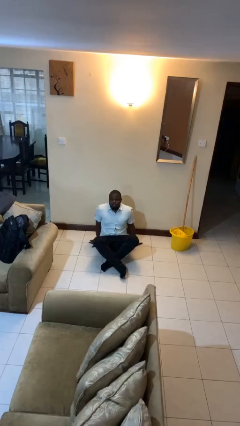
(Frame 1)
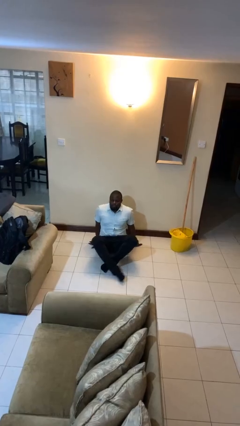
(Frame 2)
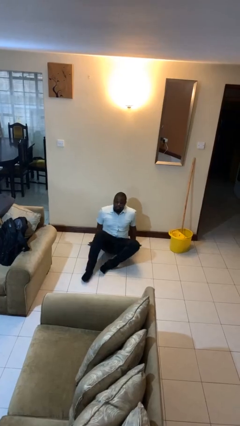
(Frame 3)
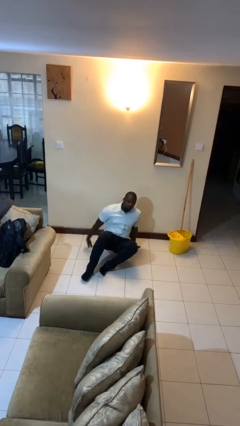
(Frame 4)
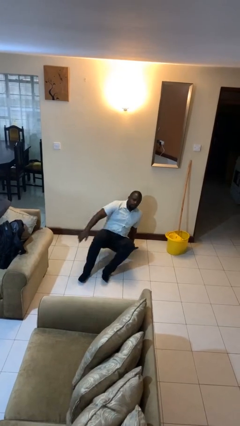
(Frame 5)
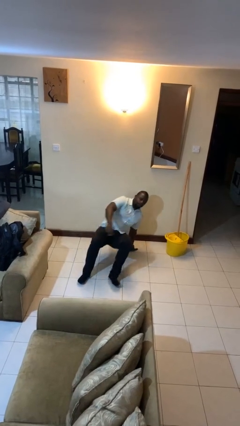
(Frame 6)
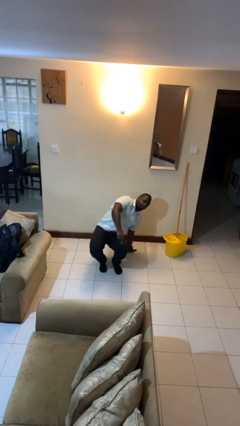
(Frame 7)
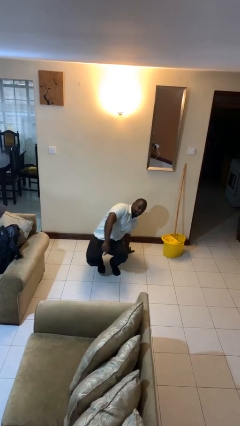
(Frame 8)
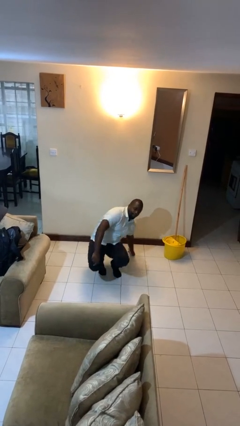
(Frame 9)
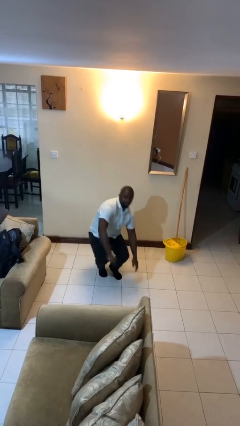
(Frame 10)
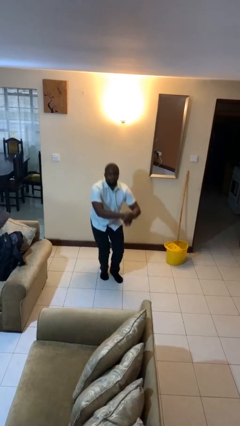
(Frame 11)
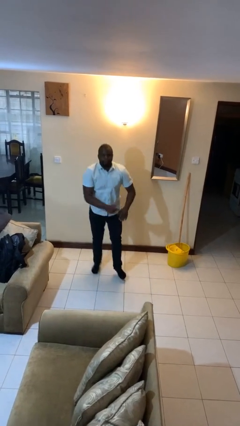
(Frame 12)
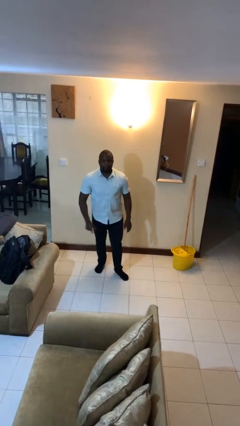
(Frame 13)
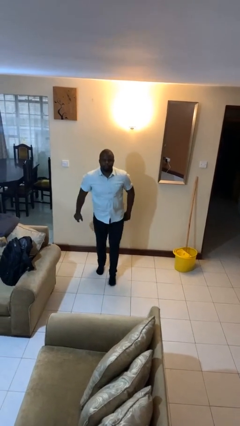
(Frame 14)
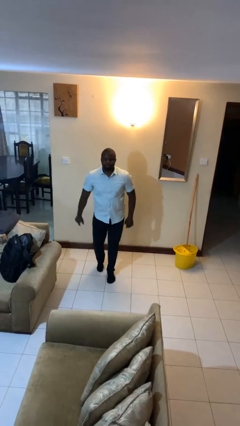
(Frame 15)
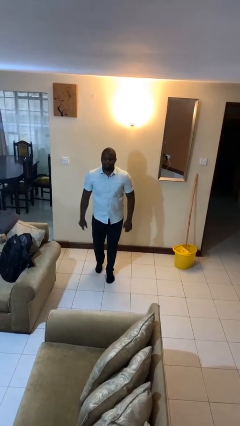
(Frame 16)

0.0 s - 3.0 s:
person stands up from floor

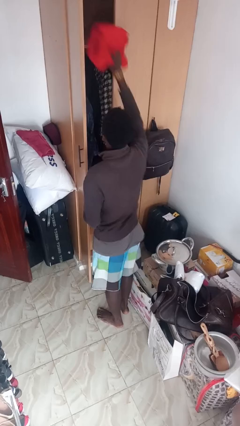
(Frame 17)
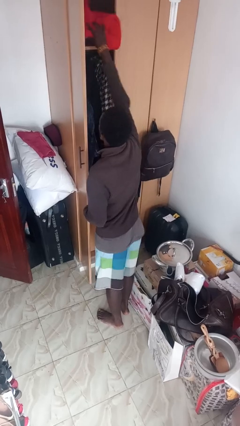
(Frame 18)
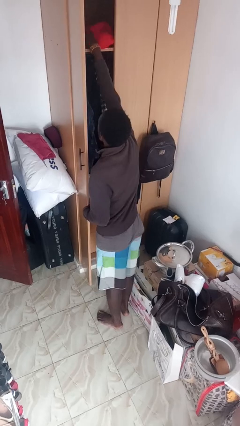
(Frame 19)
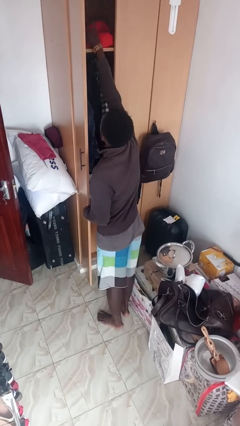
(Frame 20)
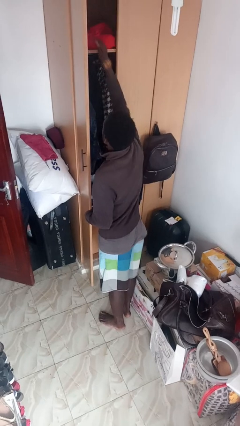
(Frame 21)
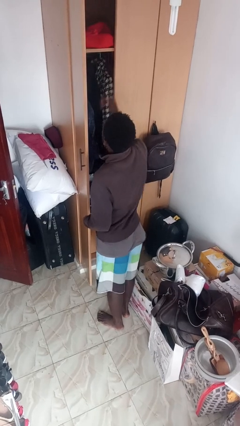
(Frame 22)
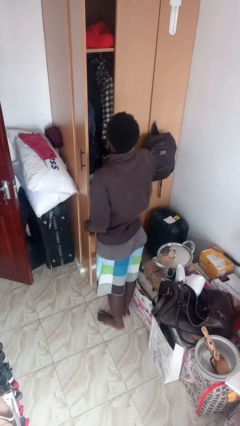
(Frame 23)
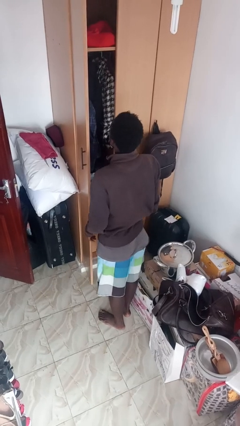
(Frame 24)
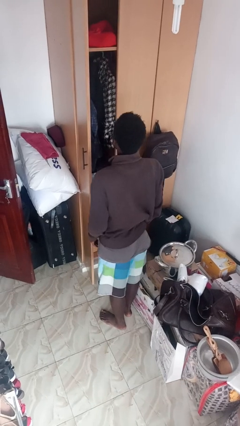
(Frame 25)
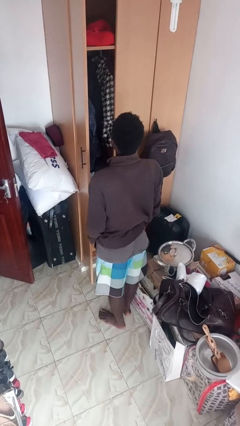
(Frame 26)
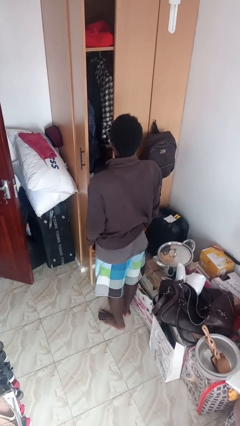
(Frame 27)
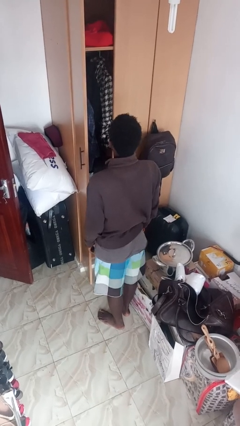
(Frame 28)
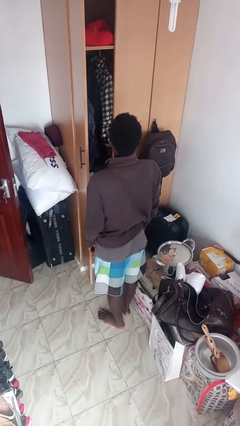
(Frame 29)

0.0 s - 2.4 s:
person puts down object on shelf

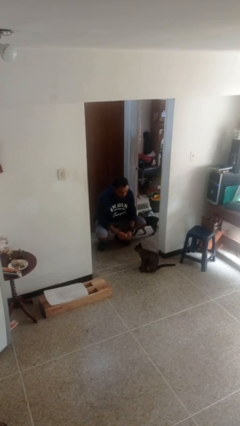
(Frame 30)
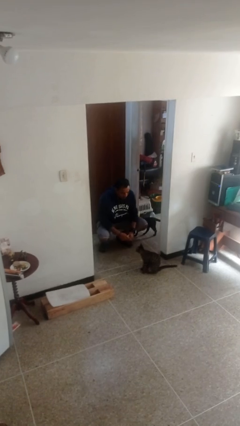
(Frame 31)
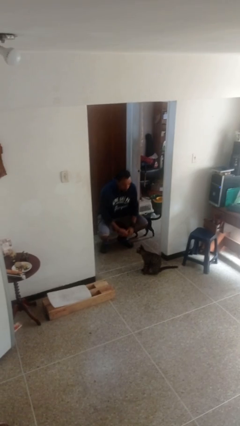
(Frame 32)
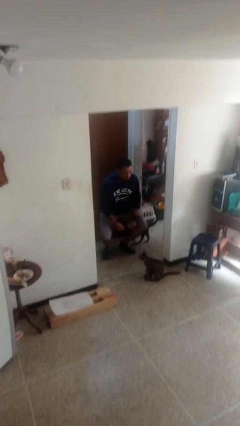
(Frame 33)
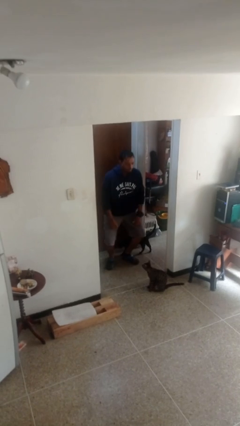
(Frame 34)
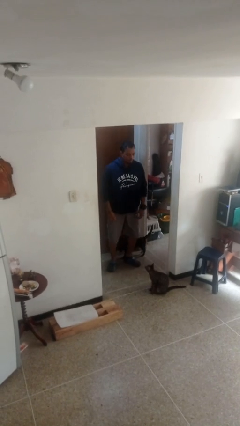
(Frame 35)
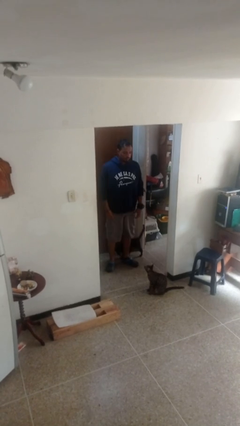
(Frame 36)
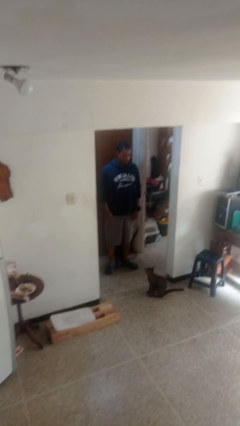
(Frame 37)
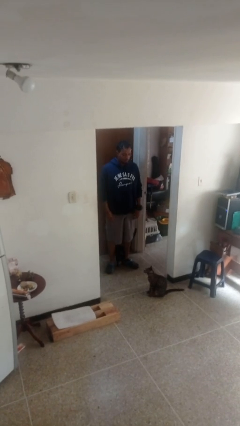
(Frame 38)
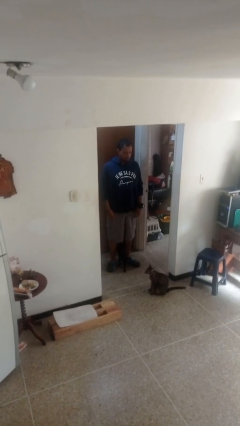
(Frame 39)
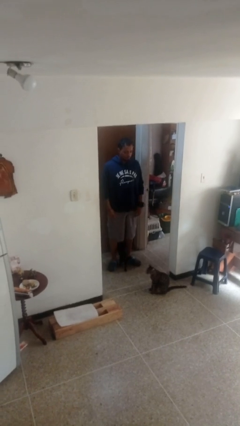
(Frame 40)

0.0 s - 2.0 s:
person stands up

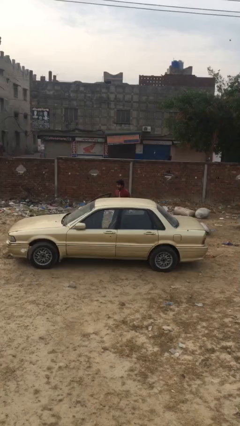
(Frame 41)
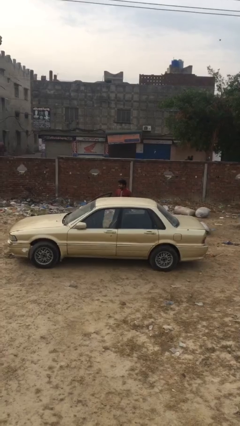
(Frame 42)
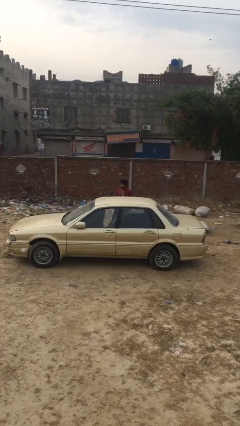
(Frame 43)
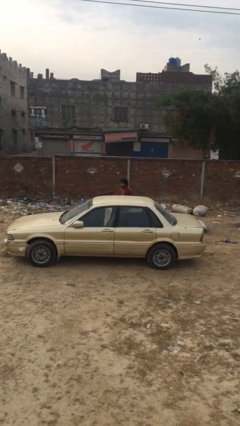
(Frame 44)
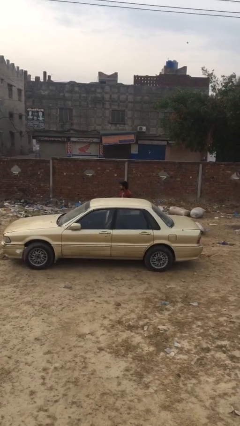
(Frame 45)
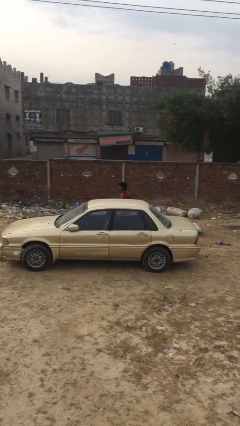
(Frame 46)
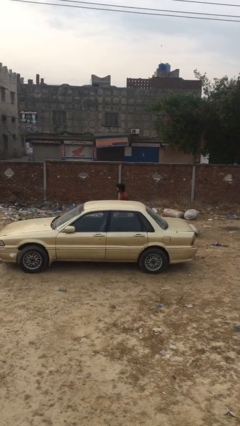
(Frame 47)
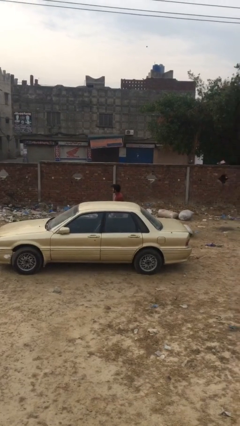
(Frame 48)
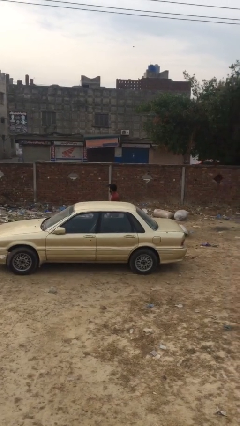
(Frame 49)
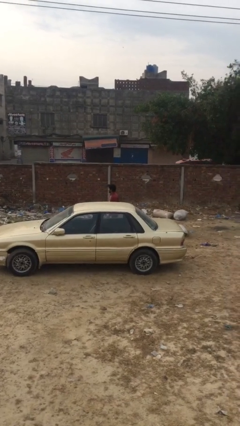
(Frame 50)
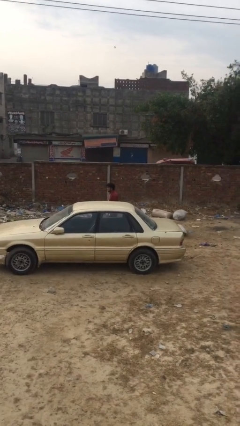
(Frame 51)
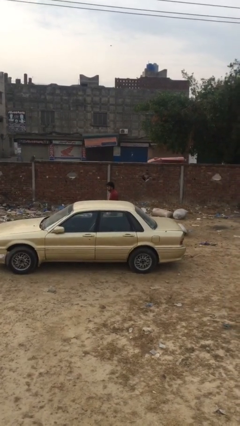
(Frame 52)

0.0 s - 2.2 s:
person closes car door

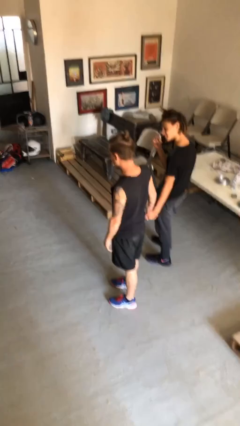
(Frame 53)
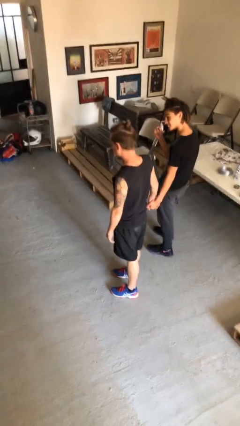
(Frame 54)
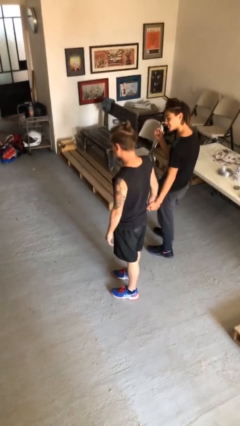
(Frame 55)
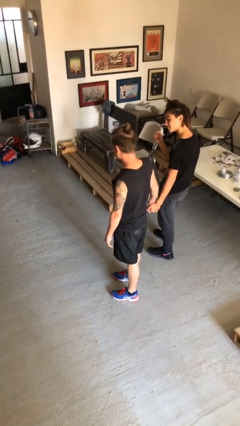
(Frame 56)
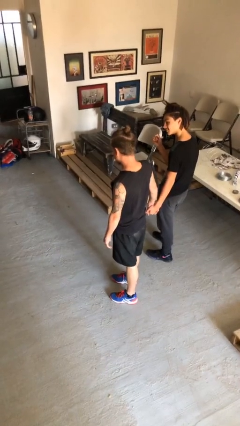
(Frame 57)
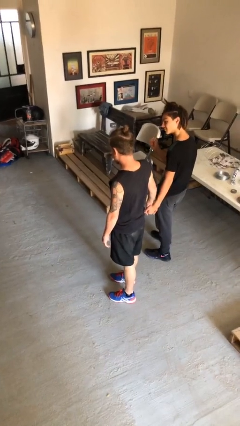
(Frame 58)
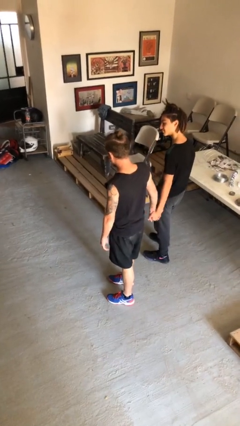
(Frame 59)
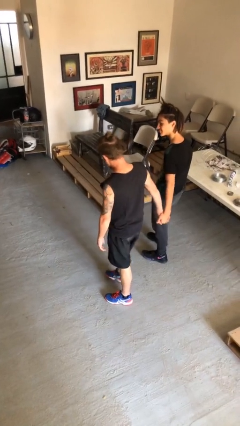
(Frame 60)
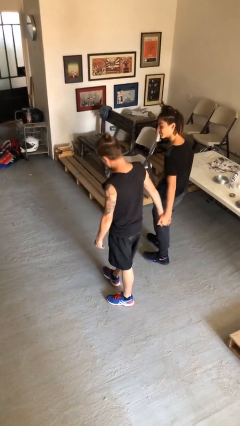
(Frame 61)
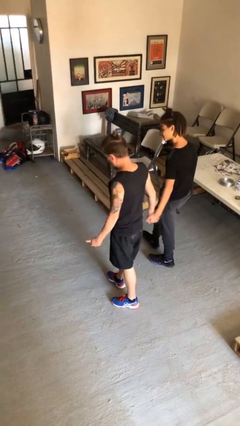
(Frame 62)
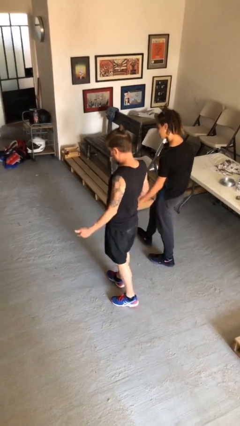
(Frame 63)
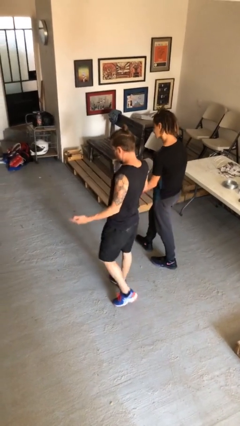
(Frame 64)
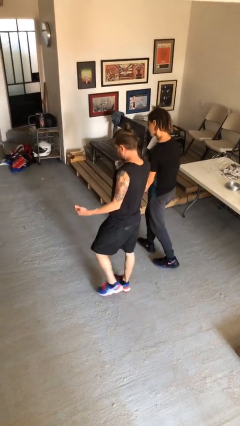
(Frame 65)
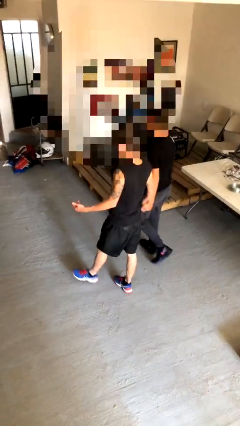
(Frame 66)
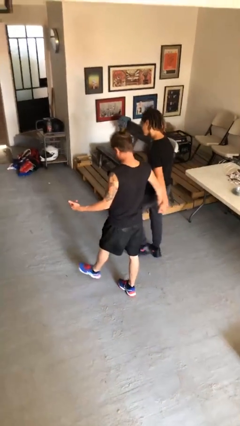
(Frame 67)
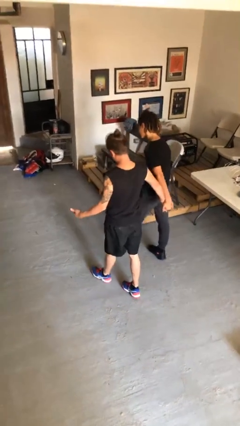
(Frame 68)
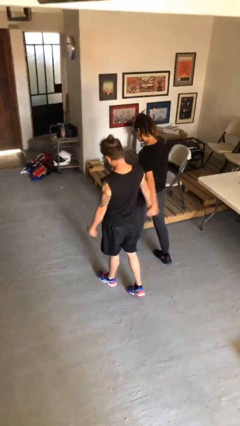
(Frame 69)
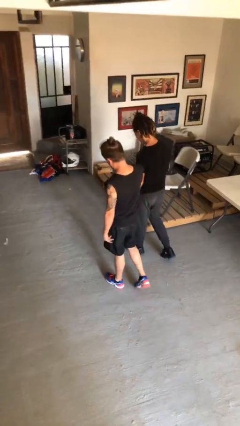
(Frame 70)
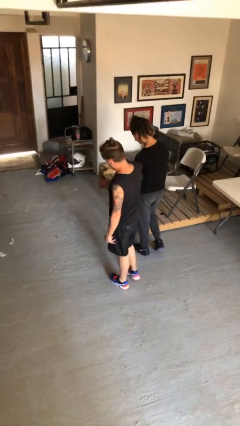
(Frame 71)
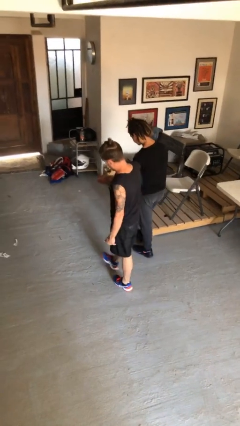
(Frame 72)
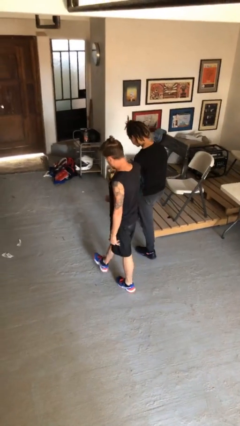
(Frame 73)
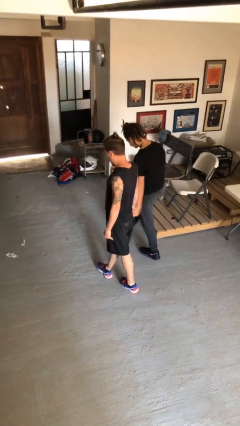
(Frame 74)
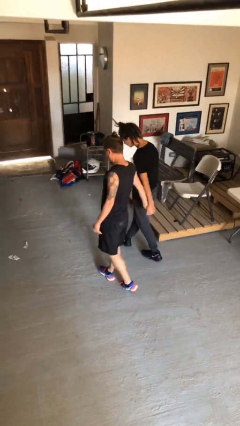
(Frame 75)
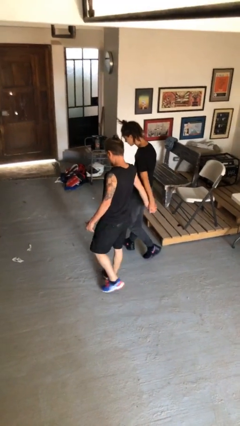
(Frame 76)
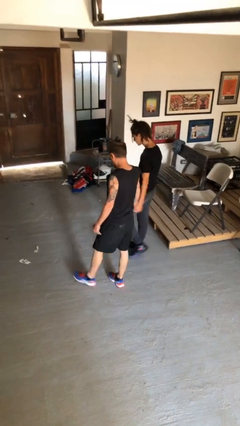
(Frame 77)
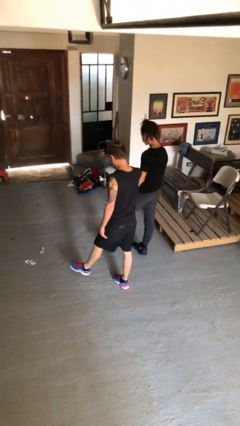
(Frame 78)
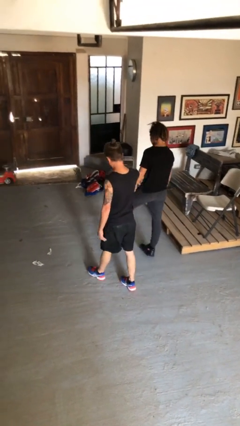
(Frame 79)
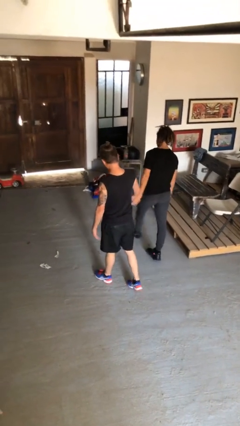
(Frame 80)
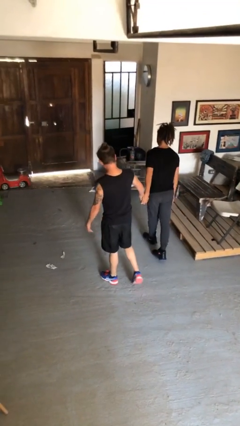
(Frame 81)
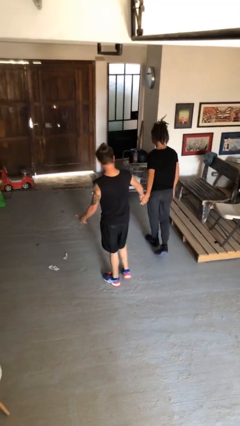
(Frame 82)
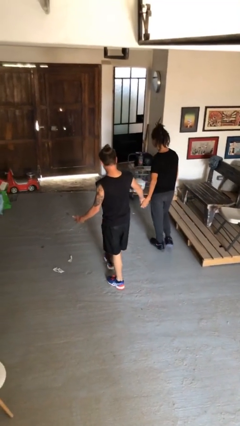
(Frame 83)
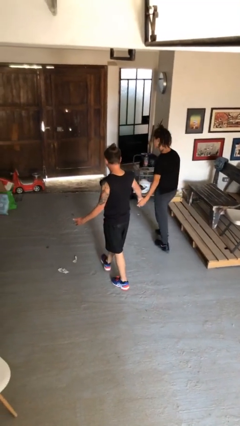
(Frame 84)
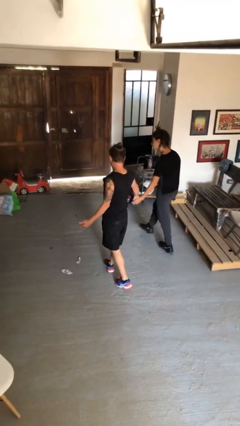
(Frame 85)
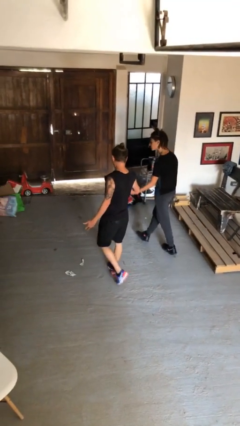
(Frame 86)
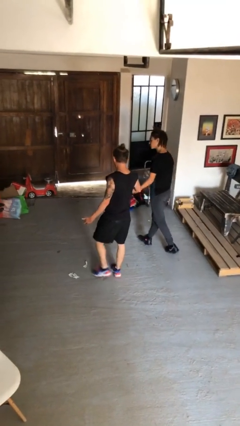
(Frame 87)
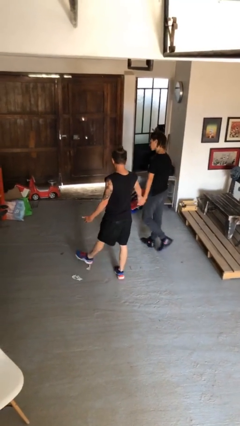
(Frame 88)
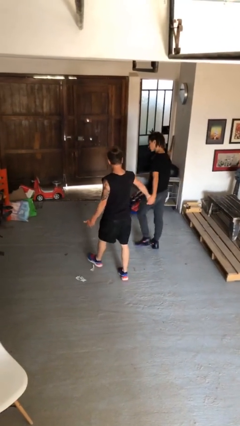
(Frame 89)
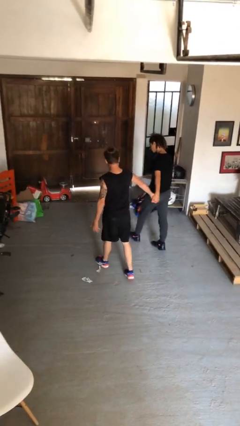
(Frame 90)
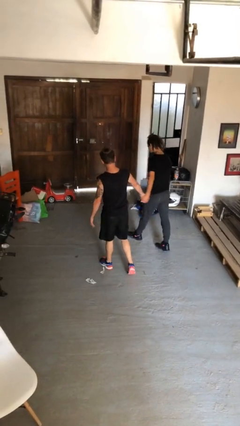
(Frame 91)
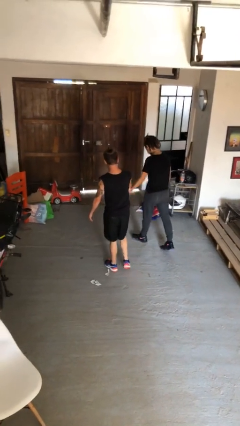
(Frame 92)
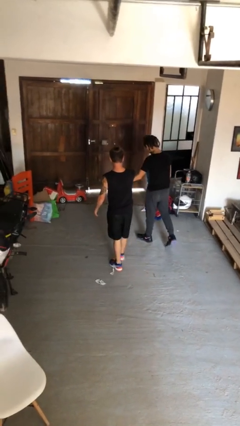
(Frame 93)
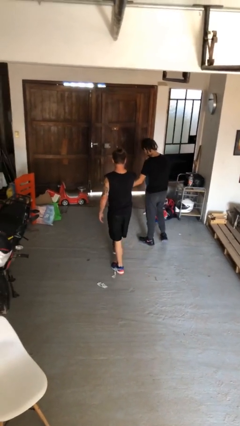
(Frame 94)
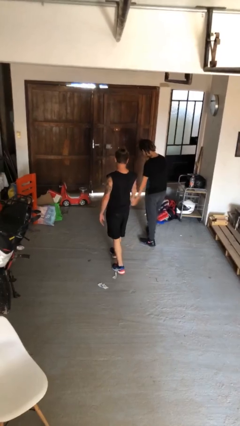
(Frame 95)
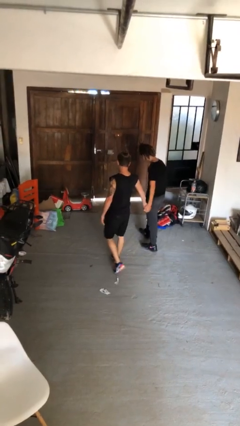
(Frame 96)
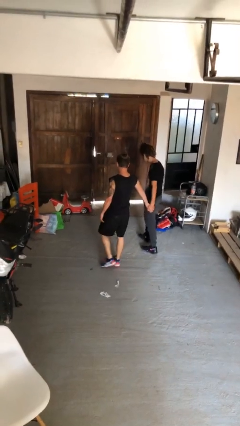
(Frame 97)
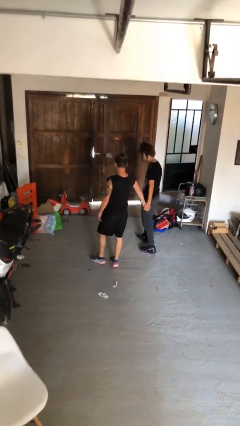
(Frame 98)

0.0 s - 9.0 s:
person holds hand
